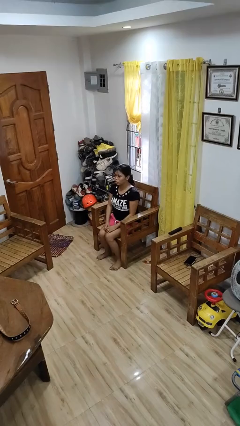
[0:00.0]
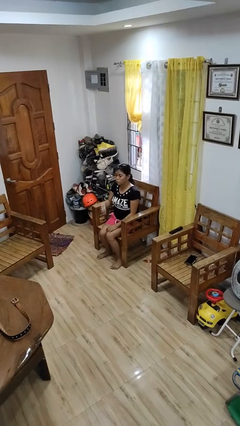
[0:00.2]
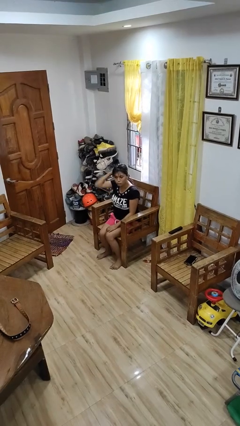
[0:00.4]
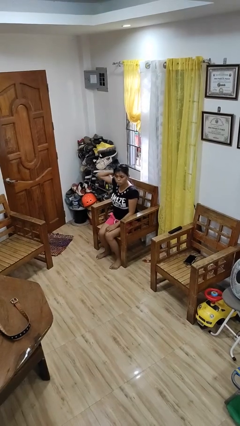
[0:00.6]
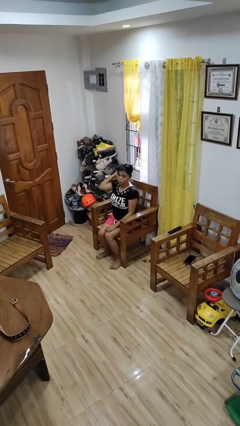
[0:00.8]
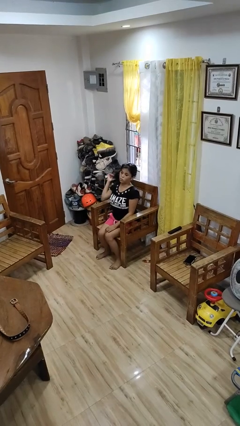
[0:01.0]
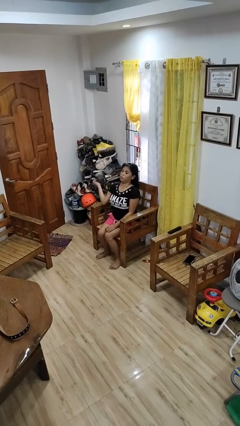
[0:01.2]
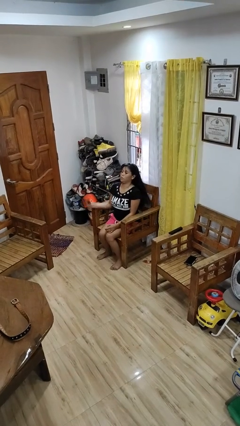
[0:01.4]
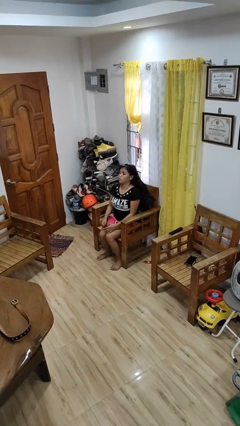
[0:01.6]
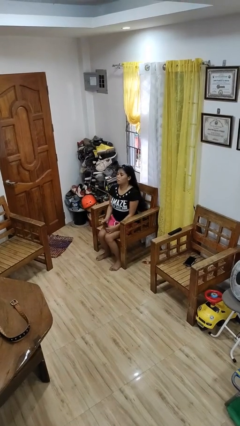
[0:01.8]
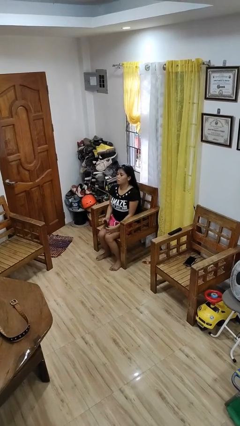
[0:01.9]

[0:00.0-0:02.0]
person takes off hairtie

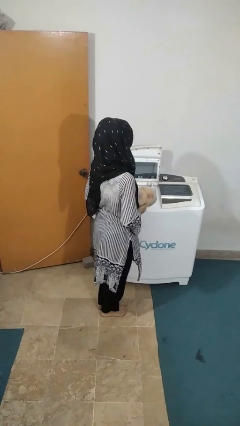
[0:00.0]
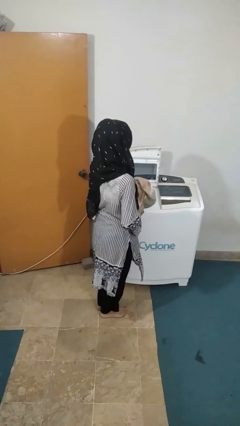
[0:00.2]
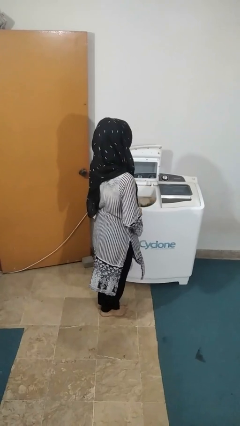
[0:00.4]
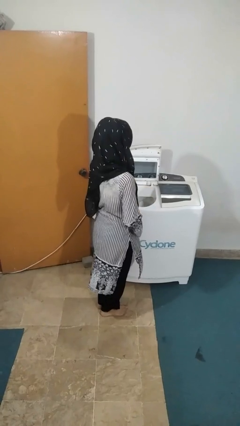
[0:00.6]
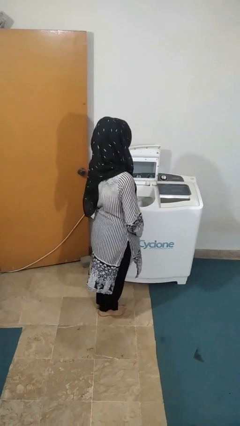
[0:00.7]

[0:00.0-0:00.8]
person loads clotheswasher

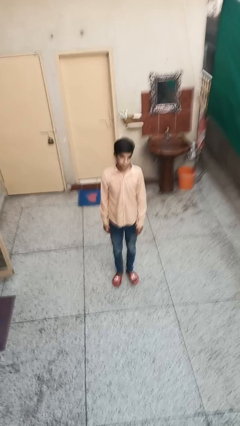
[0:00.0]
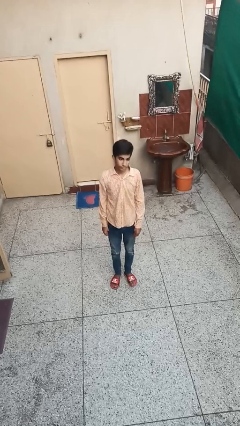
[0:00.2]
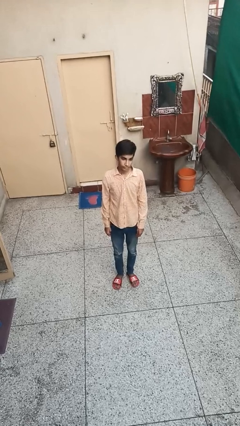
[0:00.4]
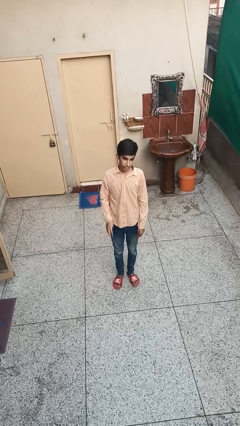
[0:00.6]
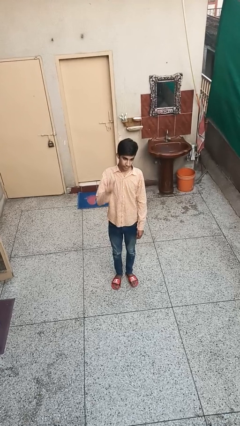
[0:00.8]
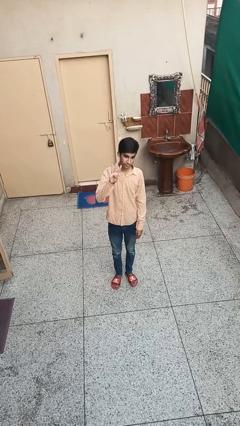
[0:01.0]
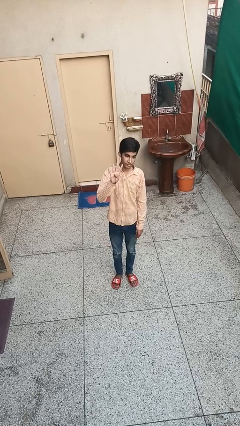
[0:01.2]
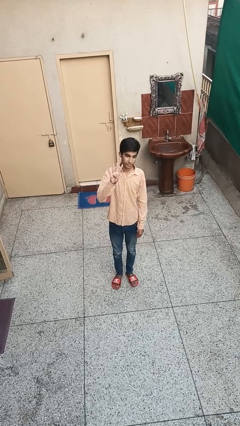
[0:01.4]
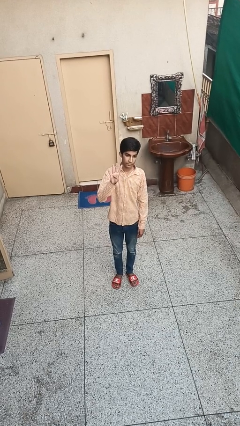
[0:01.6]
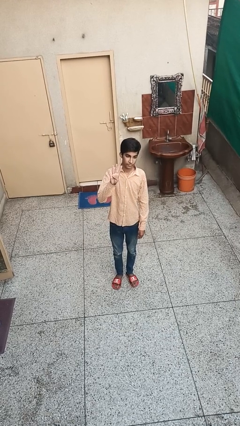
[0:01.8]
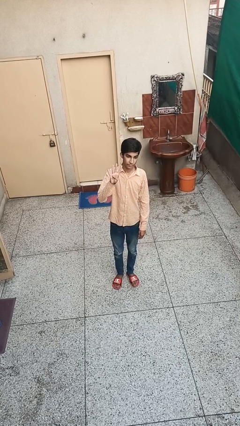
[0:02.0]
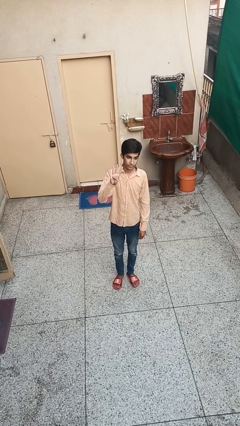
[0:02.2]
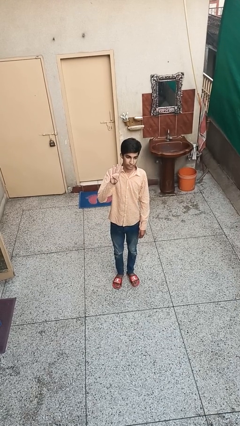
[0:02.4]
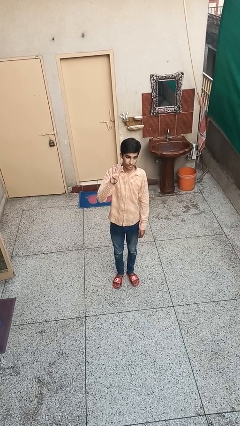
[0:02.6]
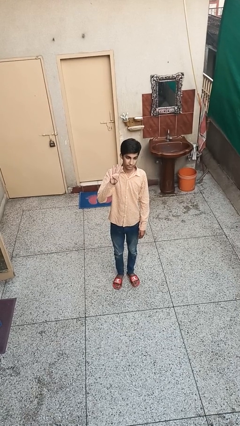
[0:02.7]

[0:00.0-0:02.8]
person gestures number four

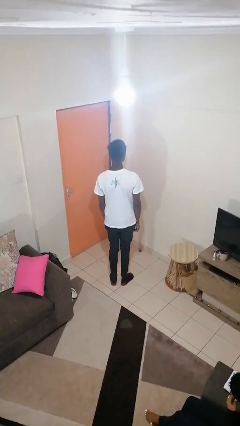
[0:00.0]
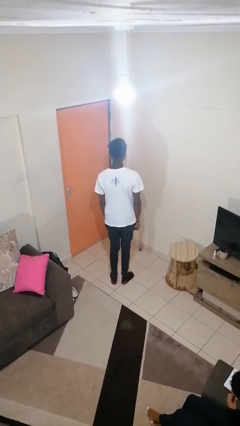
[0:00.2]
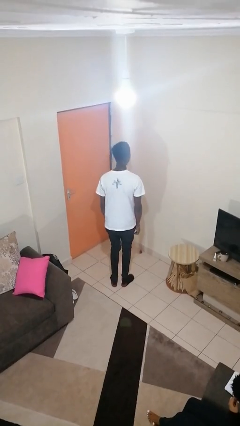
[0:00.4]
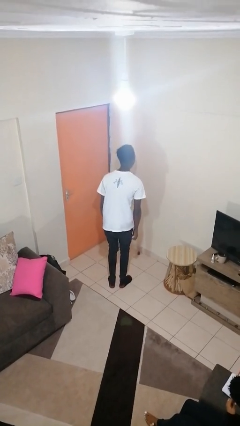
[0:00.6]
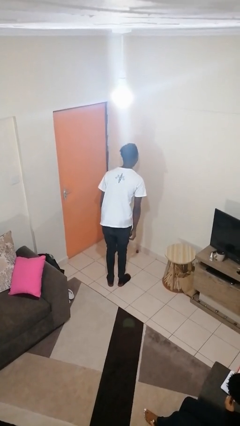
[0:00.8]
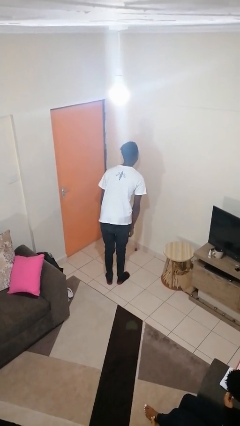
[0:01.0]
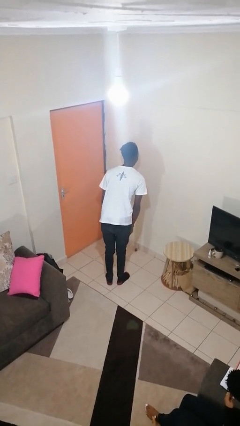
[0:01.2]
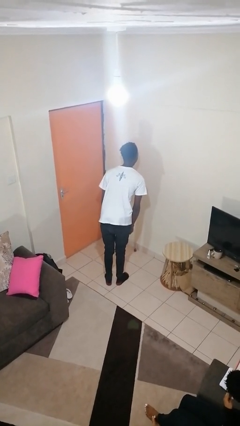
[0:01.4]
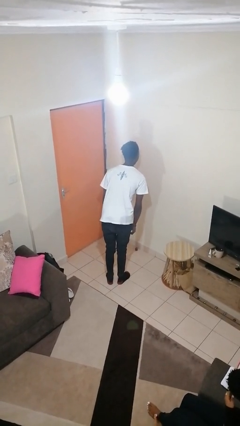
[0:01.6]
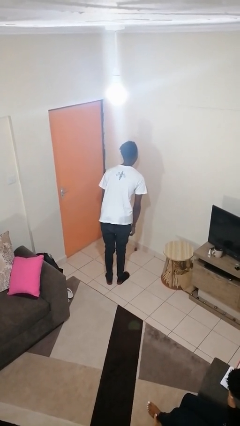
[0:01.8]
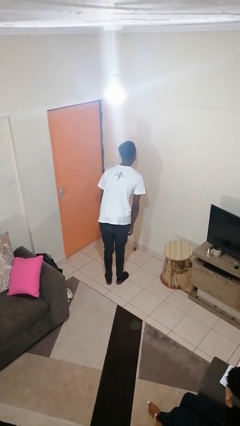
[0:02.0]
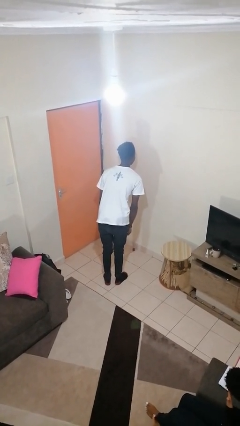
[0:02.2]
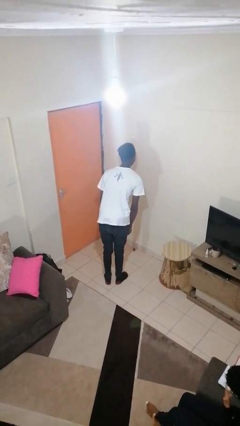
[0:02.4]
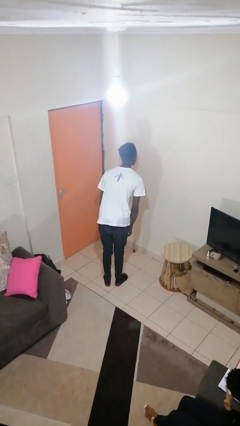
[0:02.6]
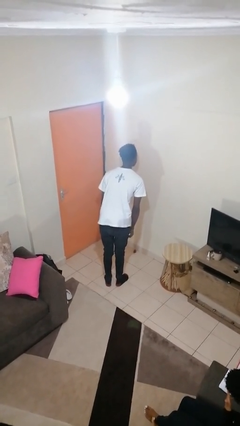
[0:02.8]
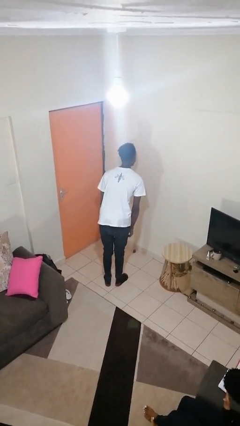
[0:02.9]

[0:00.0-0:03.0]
person sticks out tongue

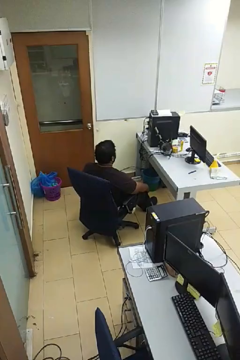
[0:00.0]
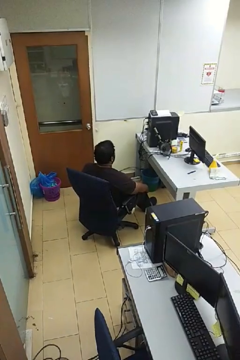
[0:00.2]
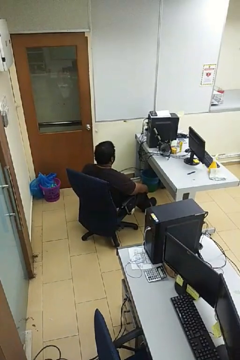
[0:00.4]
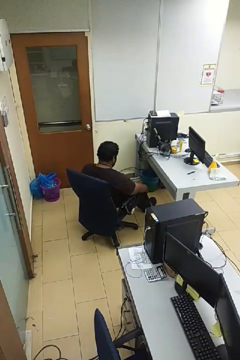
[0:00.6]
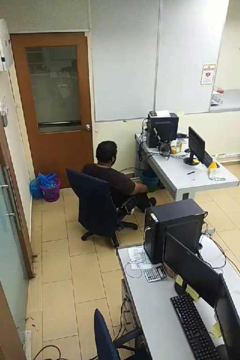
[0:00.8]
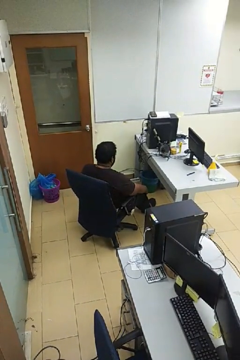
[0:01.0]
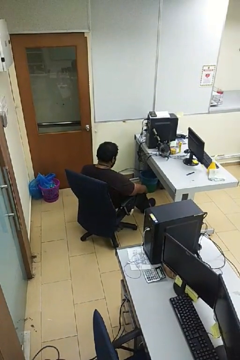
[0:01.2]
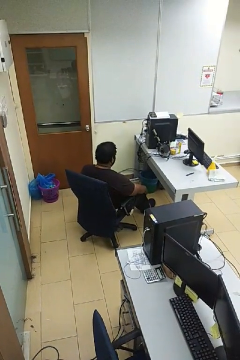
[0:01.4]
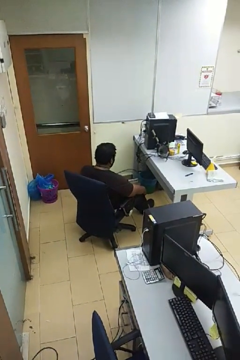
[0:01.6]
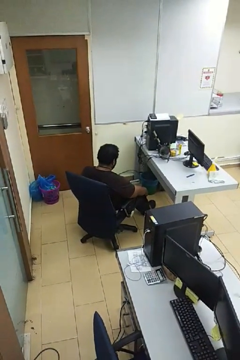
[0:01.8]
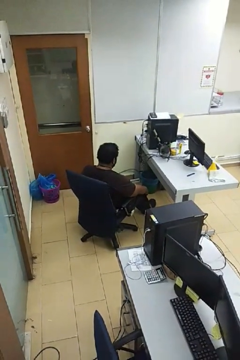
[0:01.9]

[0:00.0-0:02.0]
person nods head

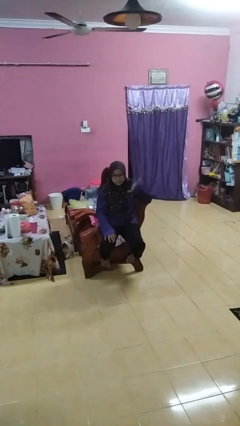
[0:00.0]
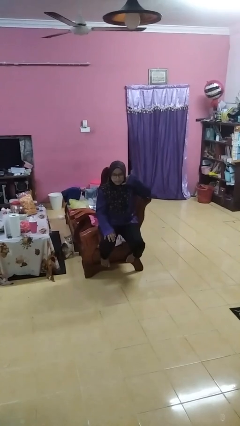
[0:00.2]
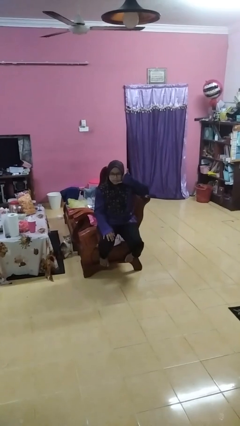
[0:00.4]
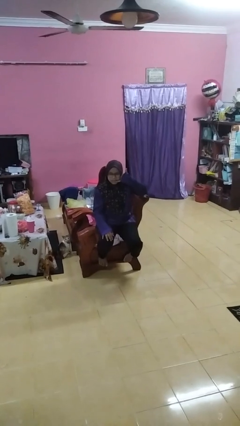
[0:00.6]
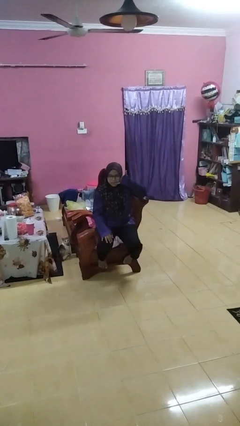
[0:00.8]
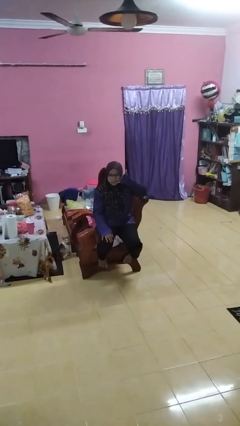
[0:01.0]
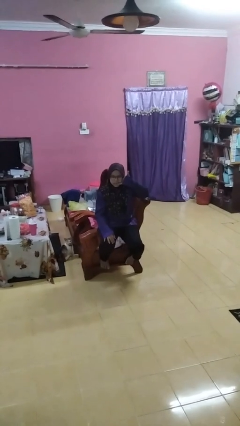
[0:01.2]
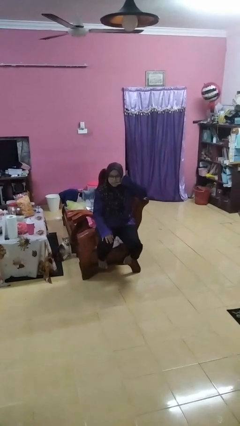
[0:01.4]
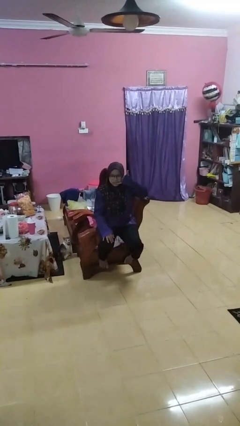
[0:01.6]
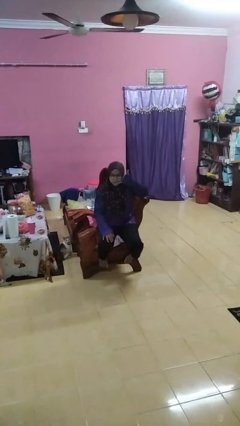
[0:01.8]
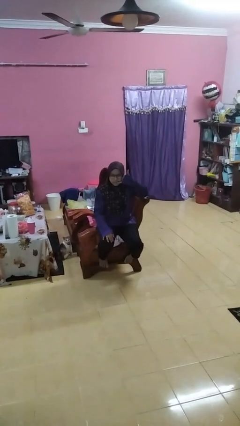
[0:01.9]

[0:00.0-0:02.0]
person gestures call me

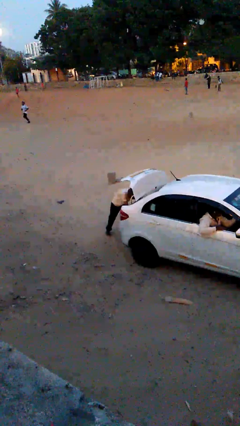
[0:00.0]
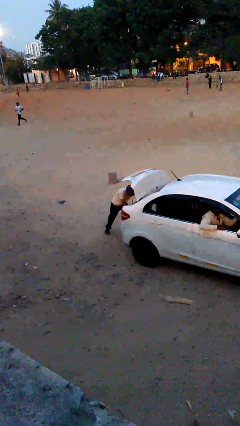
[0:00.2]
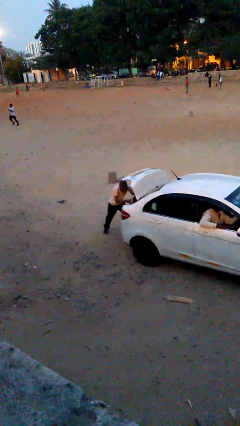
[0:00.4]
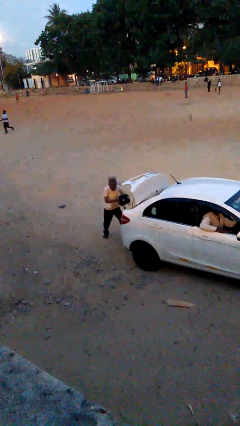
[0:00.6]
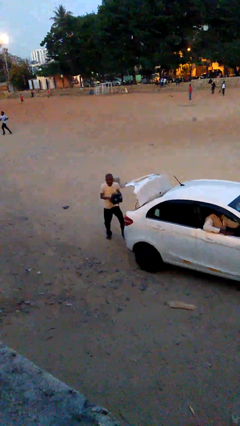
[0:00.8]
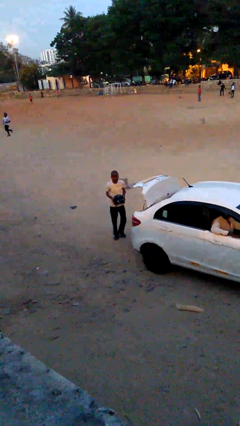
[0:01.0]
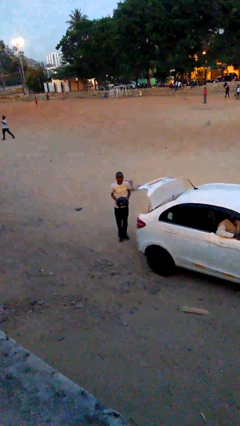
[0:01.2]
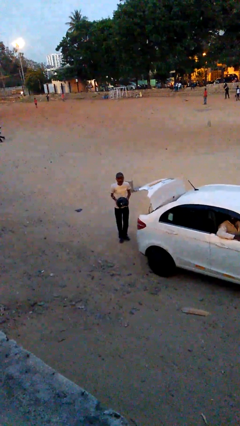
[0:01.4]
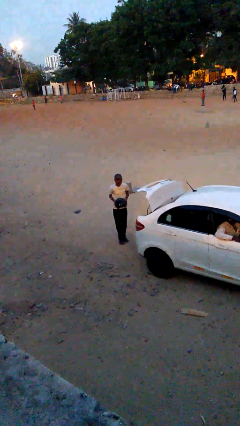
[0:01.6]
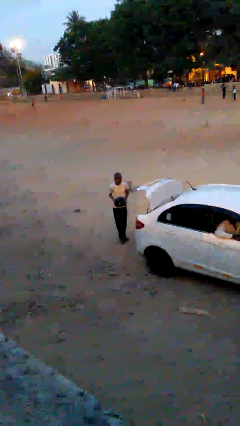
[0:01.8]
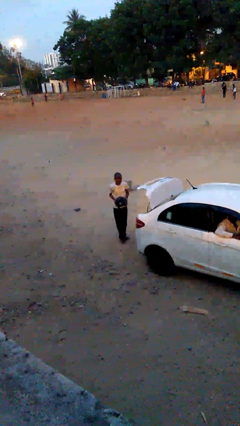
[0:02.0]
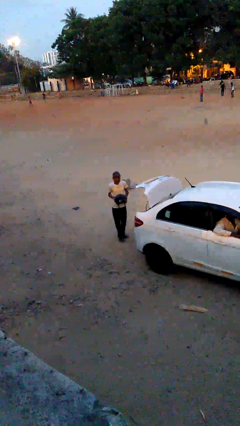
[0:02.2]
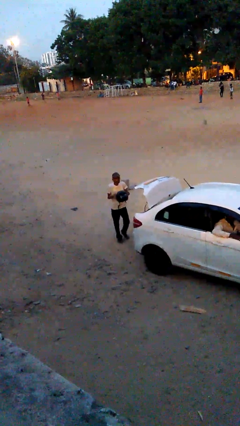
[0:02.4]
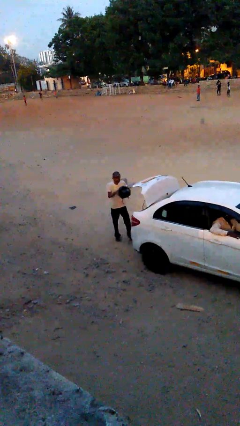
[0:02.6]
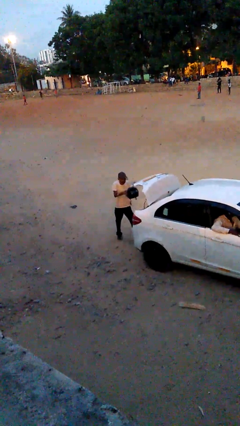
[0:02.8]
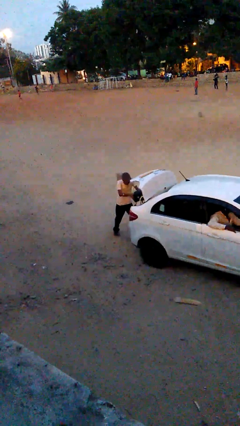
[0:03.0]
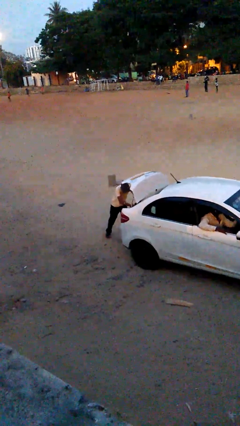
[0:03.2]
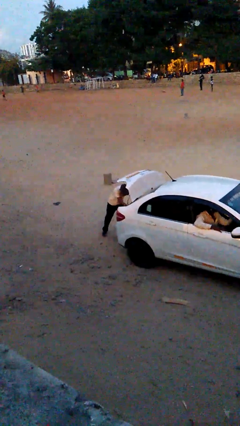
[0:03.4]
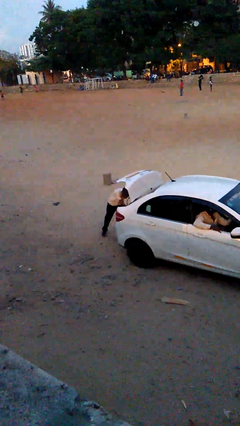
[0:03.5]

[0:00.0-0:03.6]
person unloads car

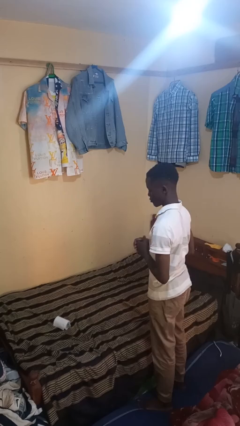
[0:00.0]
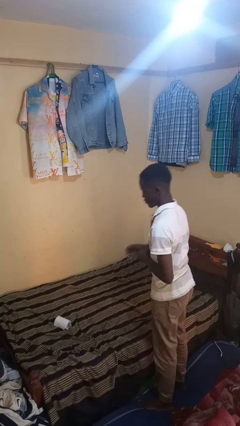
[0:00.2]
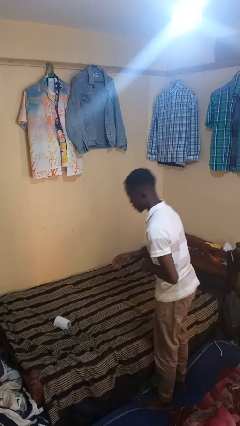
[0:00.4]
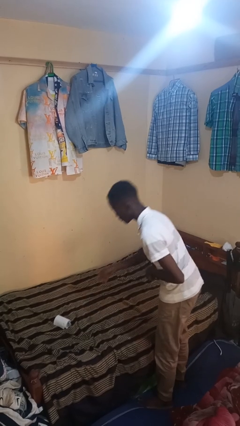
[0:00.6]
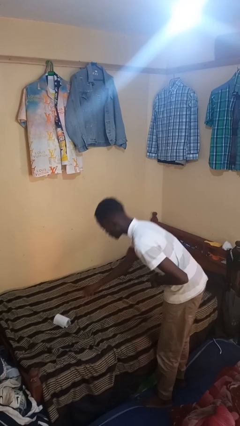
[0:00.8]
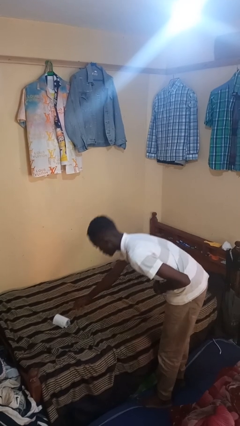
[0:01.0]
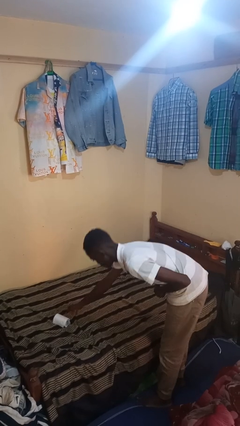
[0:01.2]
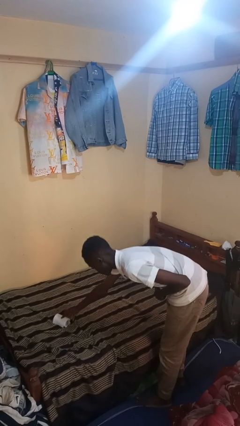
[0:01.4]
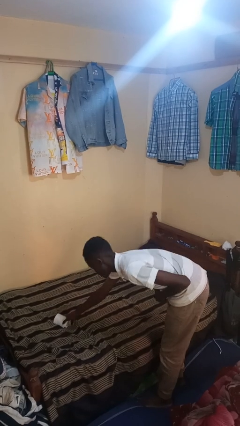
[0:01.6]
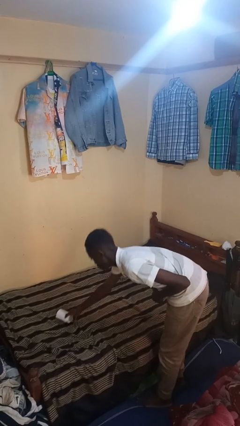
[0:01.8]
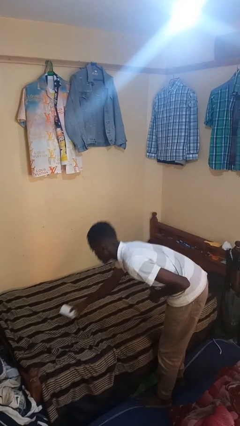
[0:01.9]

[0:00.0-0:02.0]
person picks up object from bed
